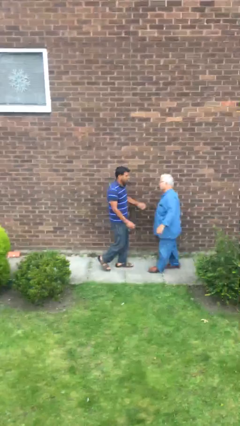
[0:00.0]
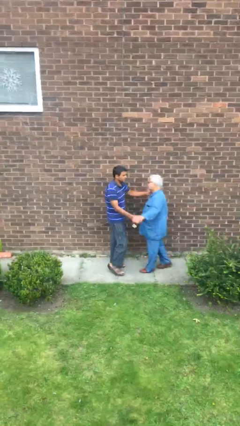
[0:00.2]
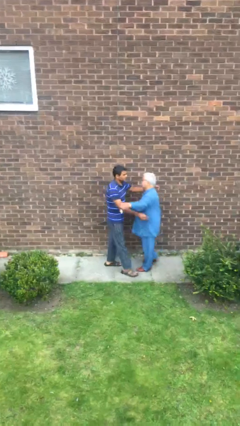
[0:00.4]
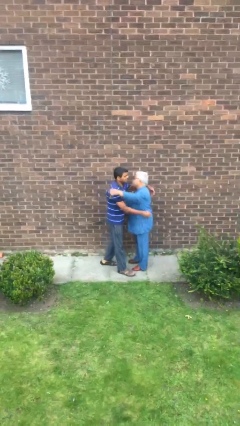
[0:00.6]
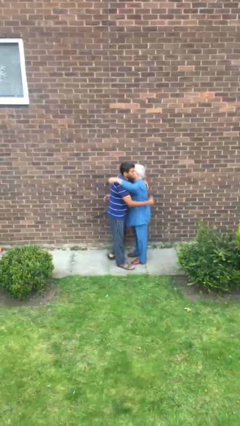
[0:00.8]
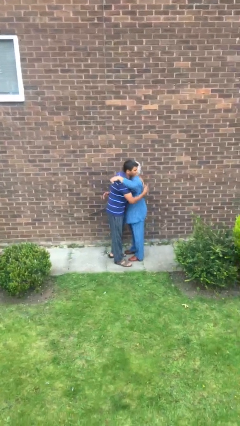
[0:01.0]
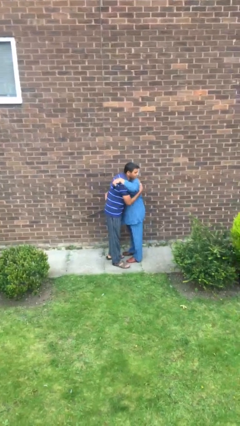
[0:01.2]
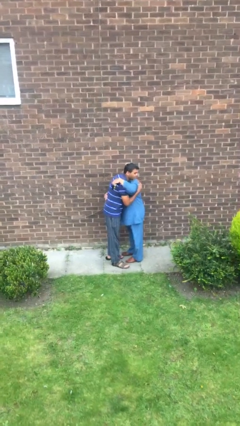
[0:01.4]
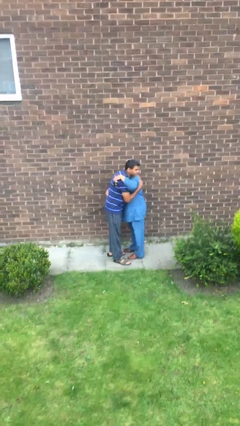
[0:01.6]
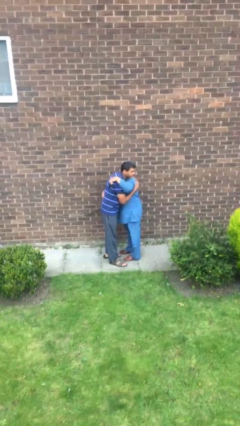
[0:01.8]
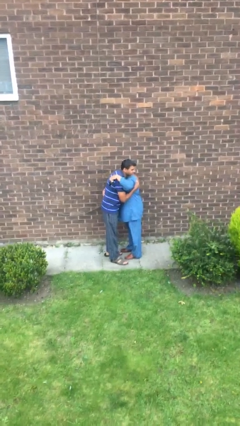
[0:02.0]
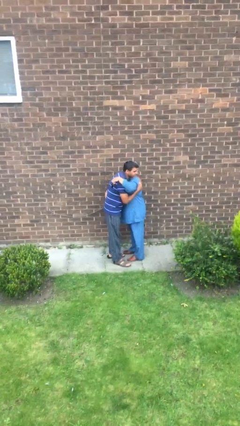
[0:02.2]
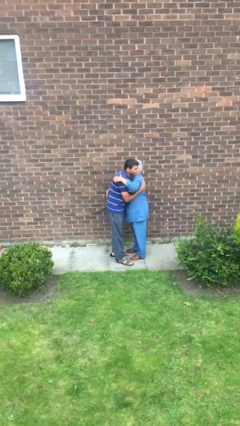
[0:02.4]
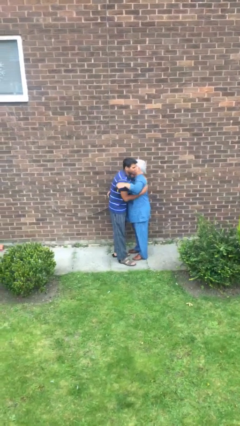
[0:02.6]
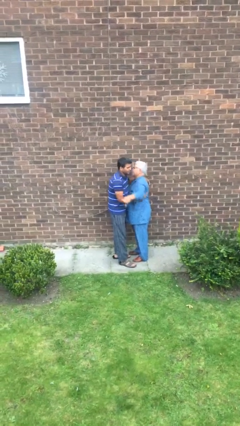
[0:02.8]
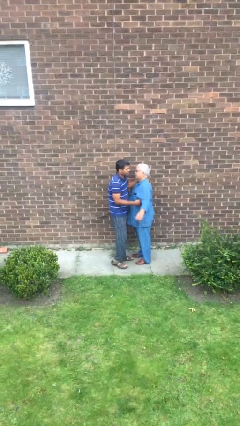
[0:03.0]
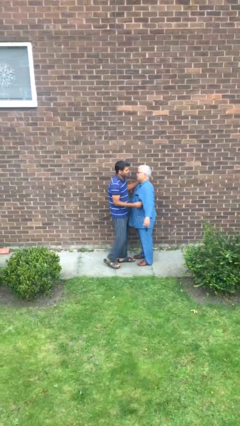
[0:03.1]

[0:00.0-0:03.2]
person embraces person

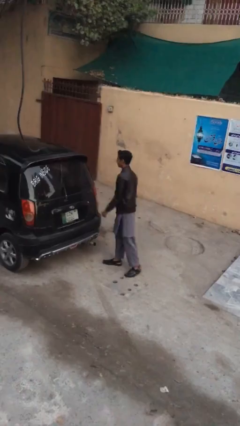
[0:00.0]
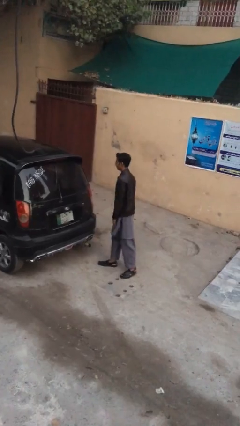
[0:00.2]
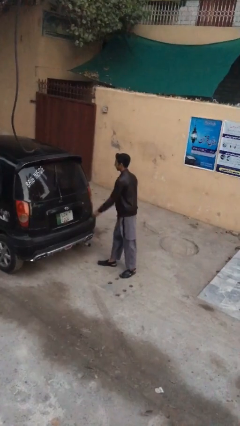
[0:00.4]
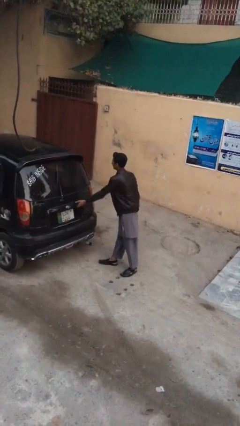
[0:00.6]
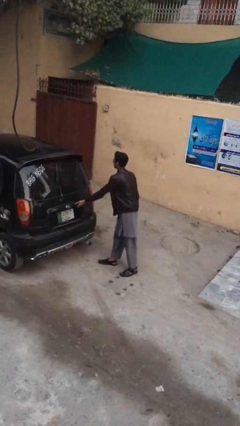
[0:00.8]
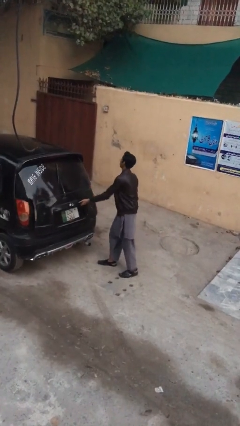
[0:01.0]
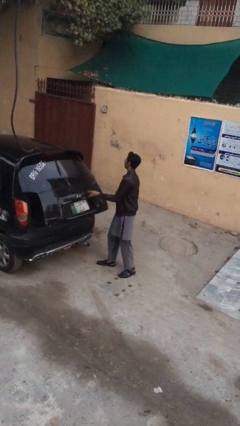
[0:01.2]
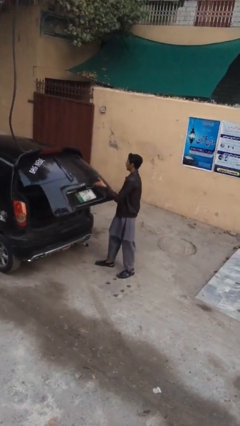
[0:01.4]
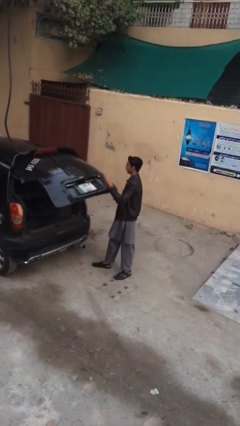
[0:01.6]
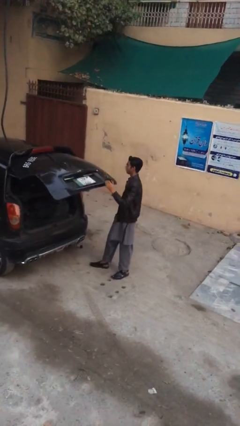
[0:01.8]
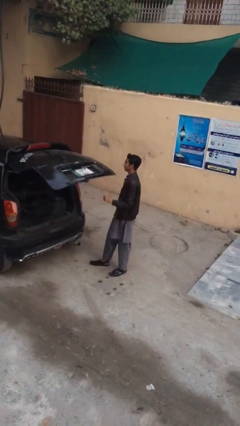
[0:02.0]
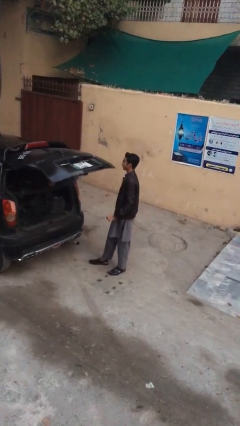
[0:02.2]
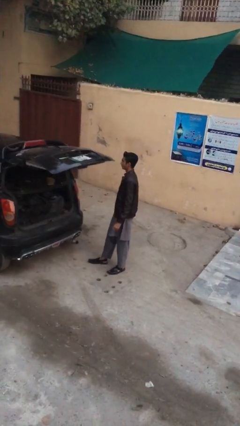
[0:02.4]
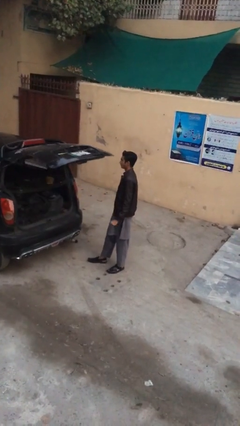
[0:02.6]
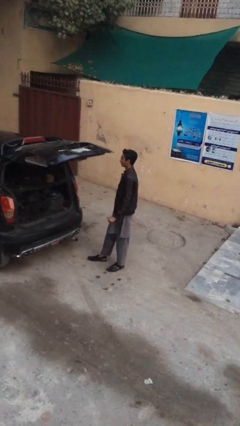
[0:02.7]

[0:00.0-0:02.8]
person opens car trunk

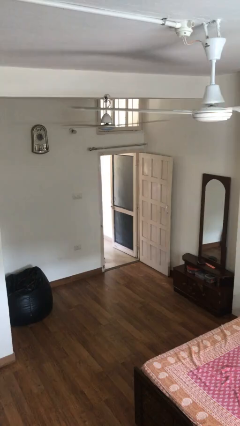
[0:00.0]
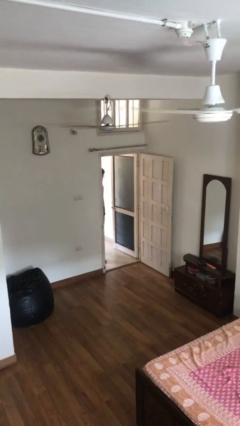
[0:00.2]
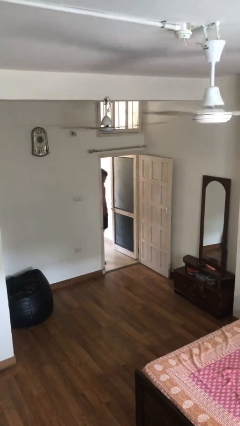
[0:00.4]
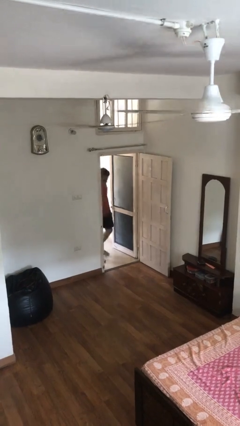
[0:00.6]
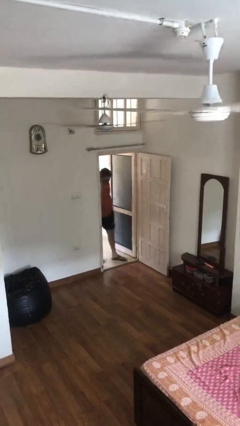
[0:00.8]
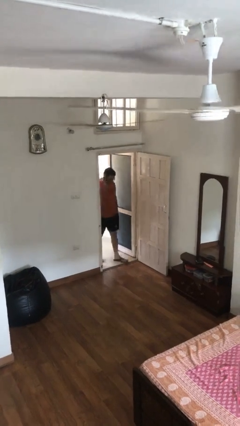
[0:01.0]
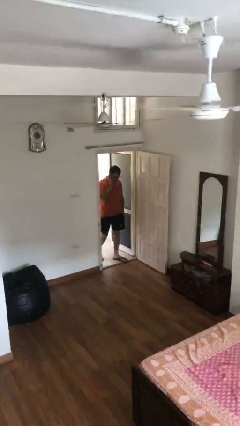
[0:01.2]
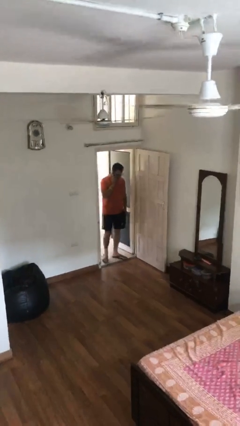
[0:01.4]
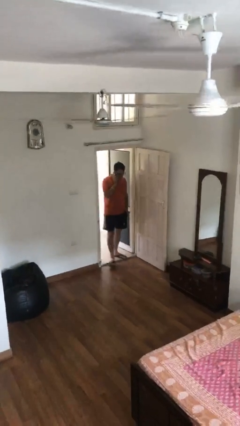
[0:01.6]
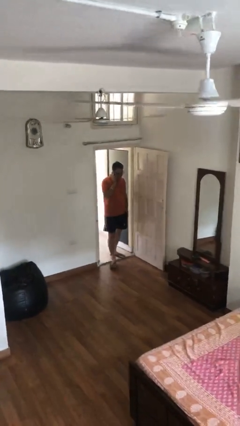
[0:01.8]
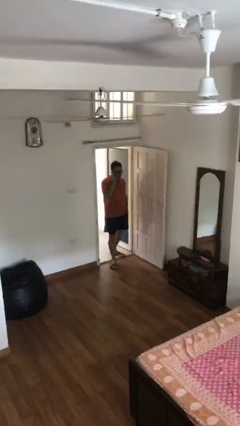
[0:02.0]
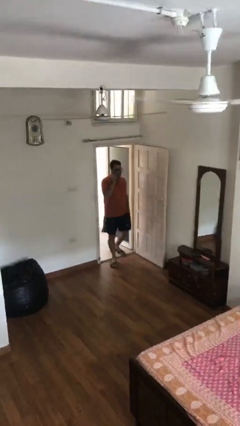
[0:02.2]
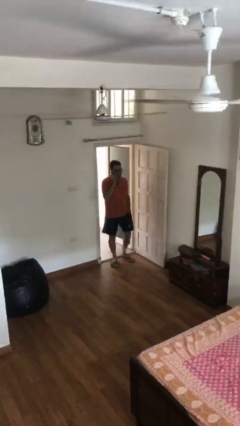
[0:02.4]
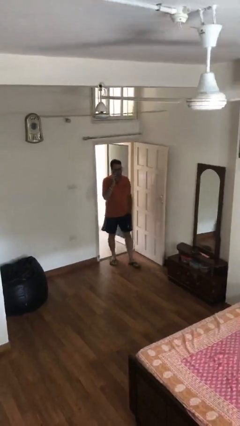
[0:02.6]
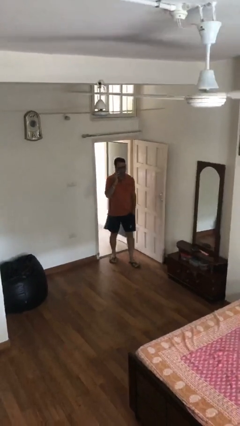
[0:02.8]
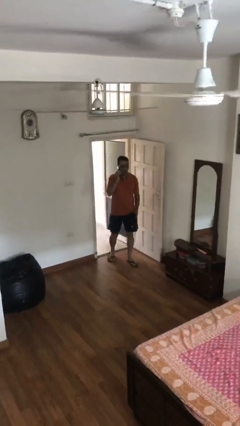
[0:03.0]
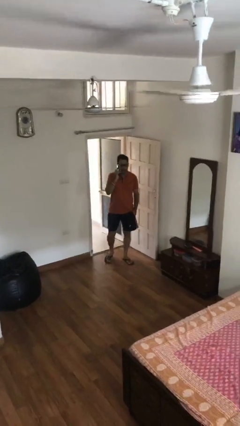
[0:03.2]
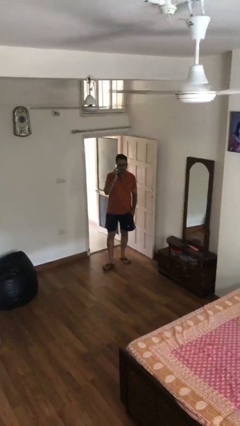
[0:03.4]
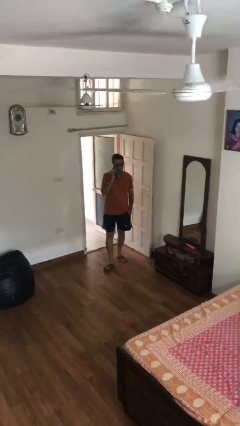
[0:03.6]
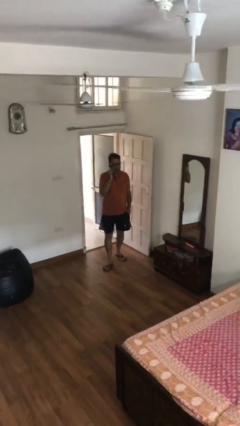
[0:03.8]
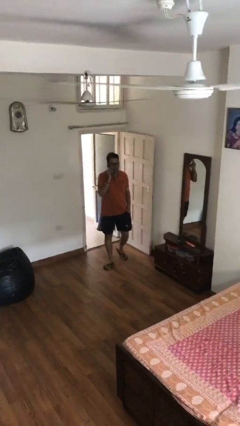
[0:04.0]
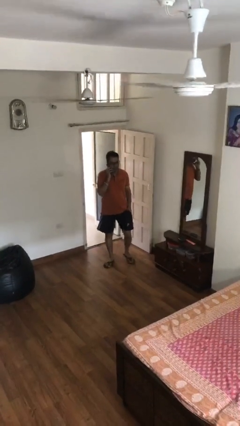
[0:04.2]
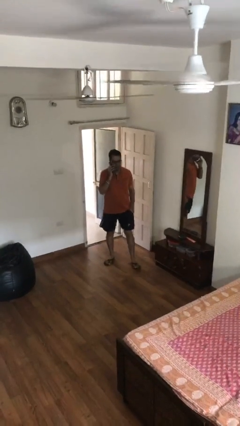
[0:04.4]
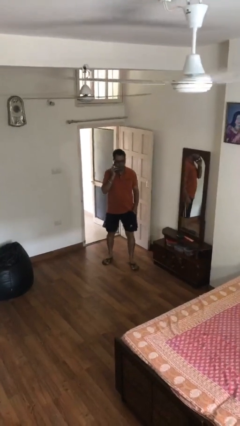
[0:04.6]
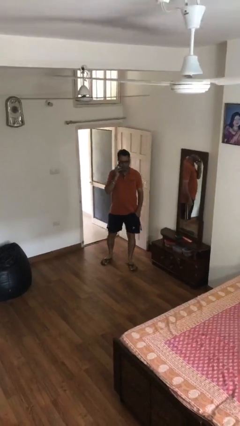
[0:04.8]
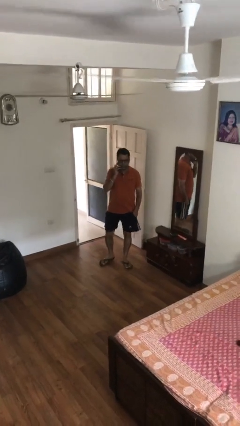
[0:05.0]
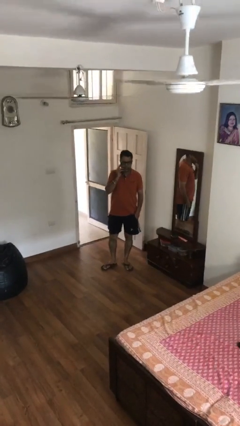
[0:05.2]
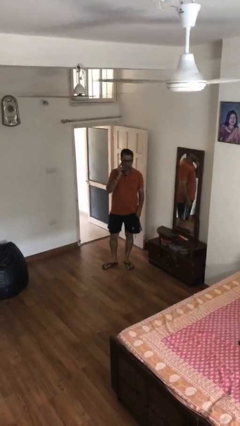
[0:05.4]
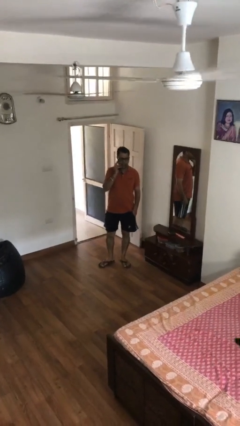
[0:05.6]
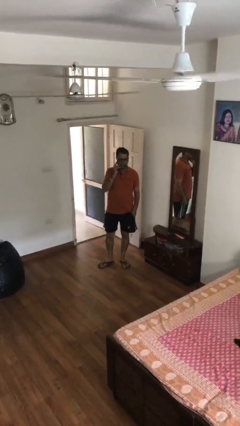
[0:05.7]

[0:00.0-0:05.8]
person enters scene through structure

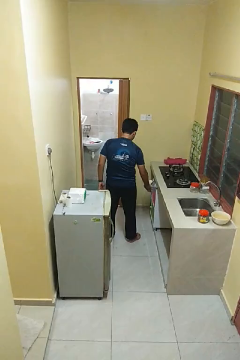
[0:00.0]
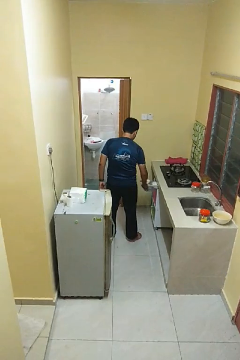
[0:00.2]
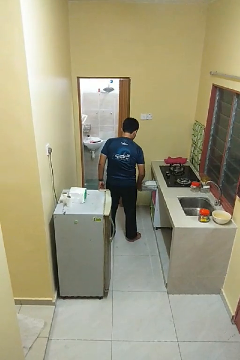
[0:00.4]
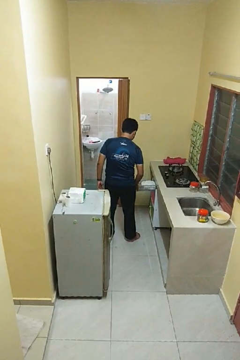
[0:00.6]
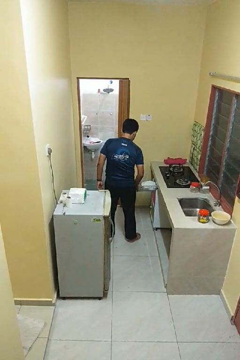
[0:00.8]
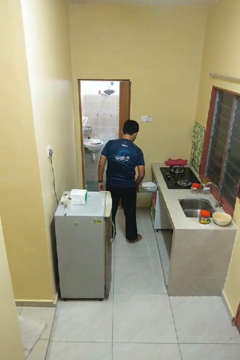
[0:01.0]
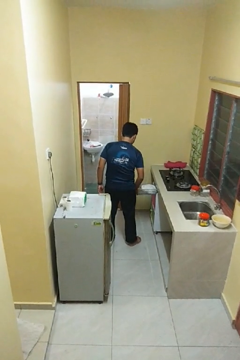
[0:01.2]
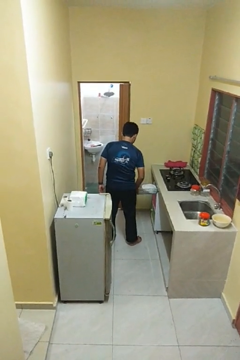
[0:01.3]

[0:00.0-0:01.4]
person opens kitchen drawer

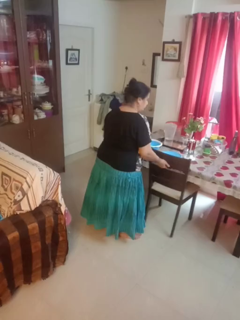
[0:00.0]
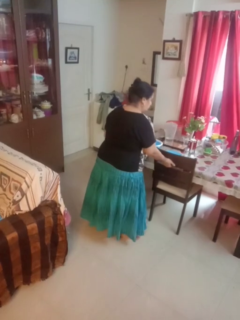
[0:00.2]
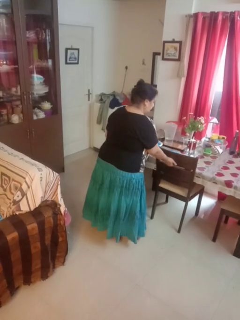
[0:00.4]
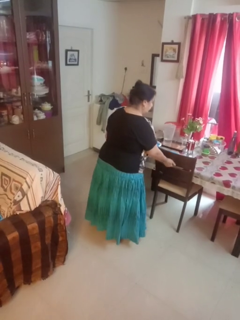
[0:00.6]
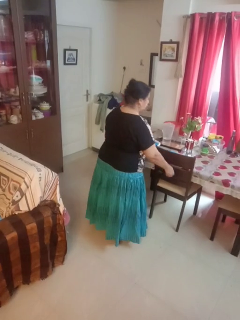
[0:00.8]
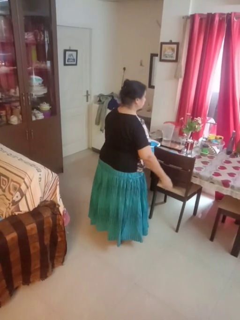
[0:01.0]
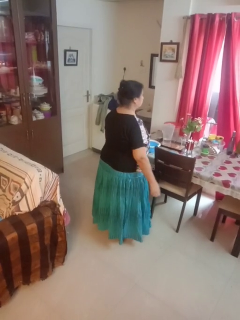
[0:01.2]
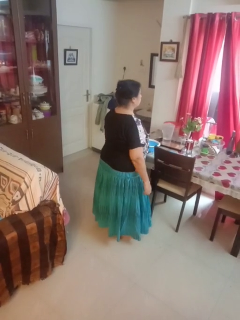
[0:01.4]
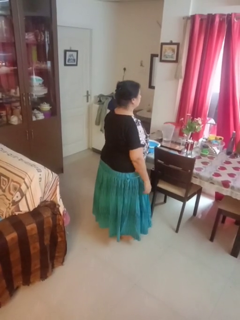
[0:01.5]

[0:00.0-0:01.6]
person pushes in chair

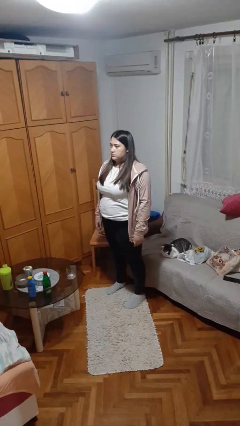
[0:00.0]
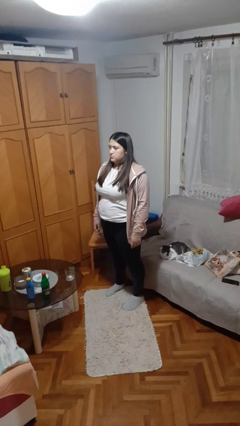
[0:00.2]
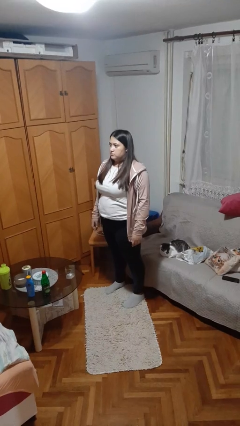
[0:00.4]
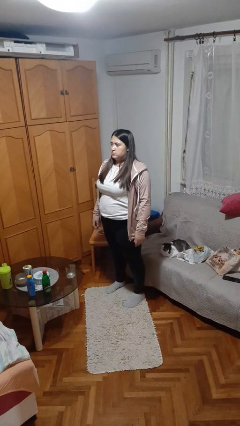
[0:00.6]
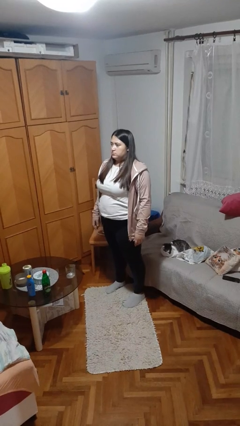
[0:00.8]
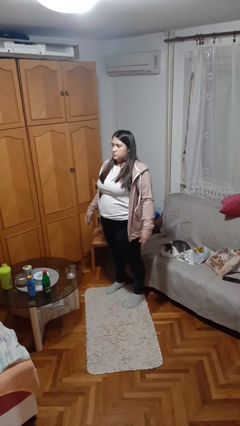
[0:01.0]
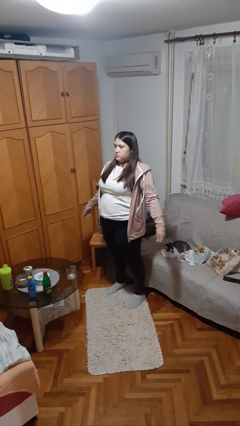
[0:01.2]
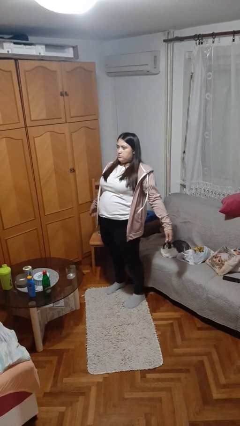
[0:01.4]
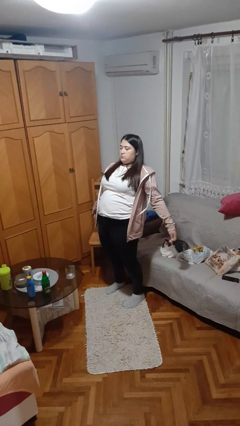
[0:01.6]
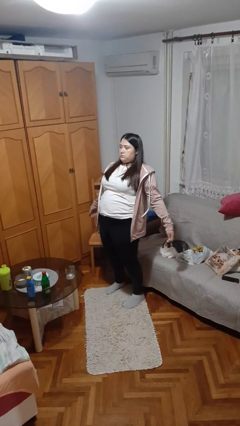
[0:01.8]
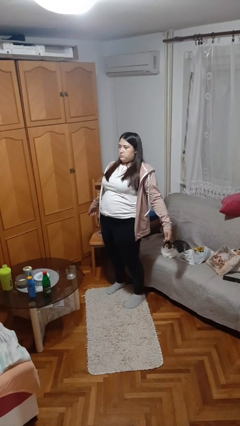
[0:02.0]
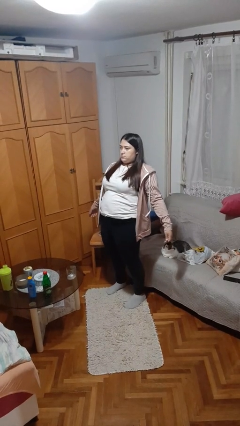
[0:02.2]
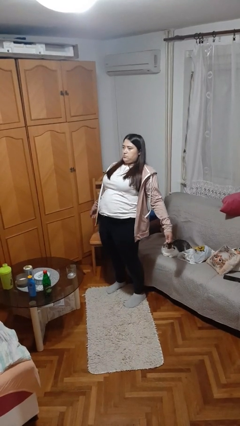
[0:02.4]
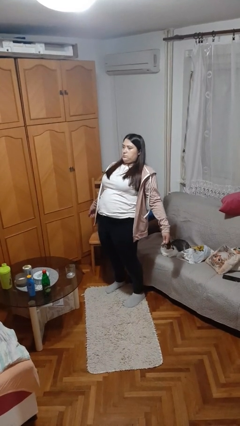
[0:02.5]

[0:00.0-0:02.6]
person stretches back

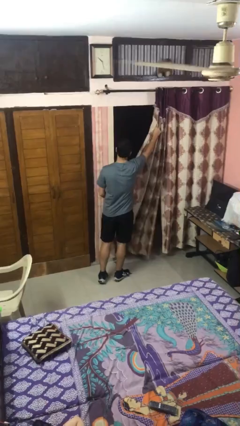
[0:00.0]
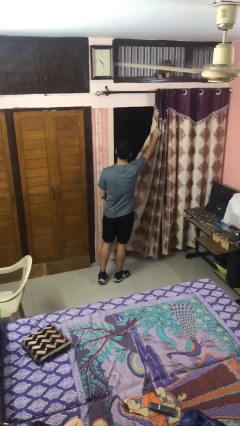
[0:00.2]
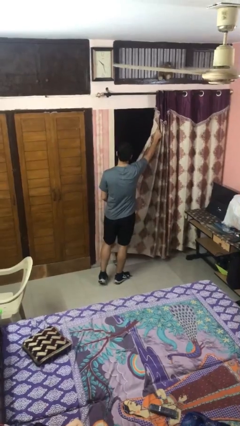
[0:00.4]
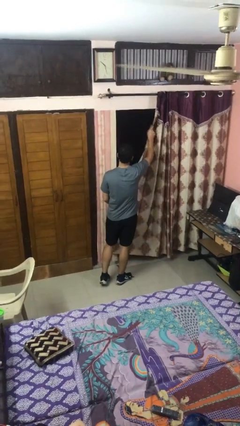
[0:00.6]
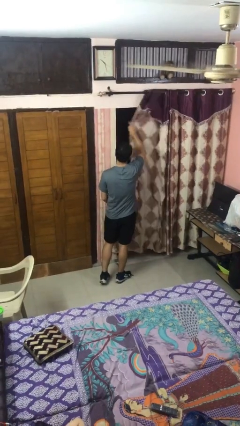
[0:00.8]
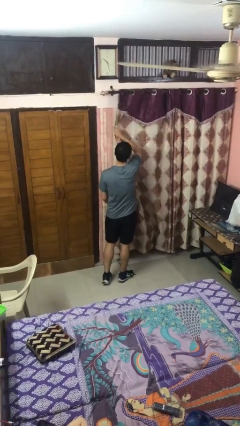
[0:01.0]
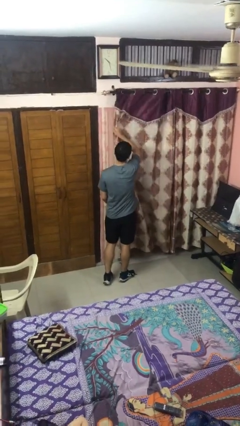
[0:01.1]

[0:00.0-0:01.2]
person closes curtains
